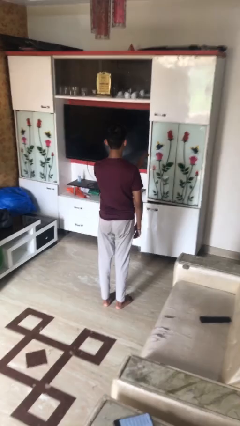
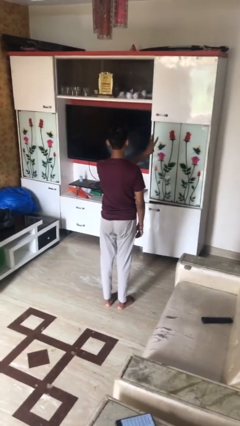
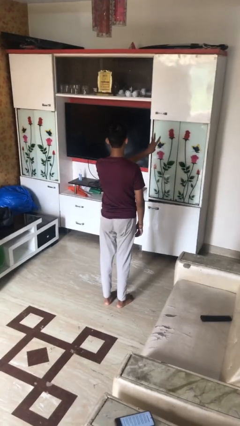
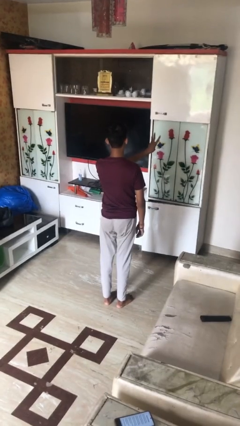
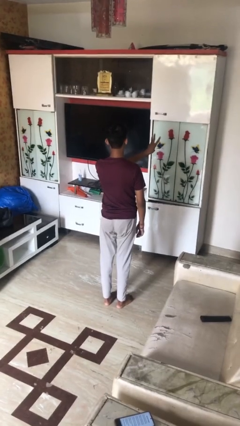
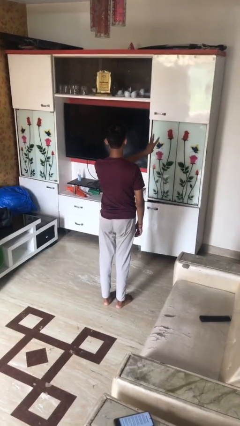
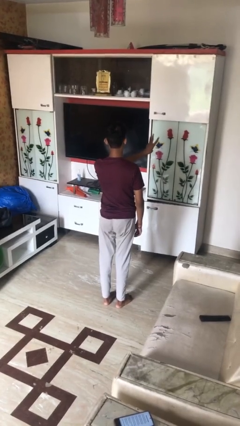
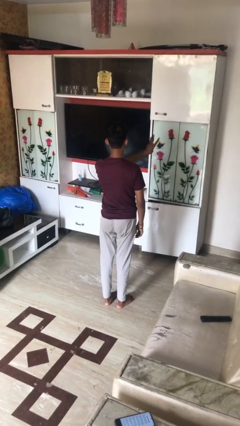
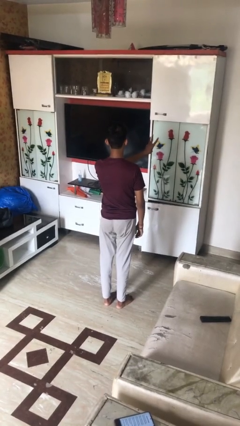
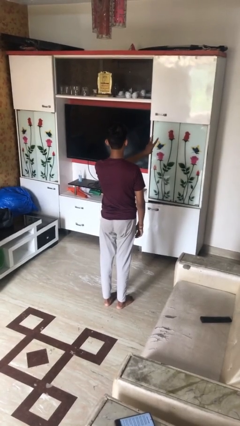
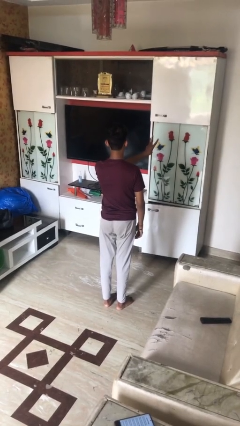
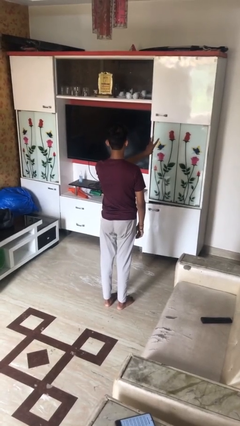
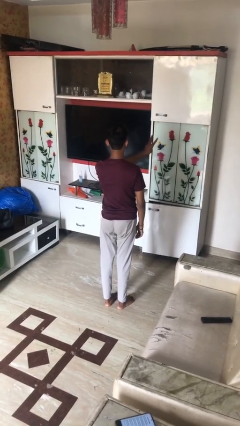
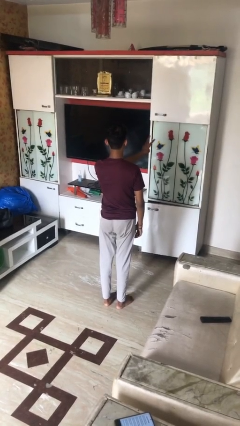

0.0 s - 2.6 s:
person gestures number three

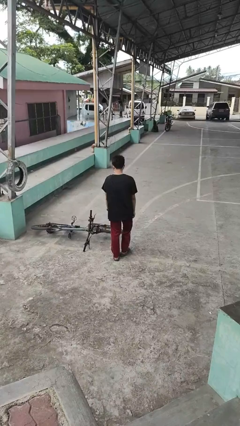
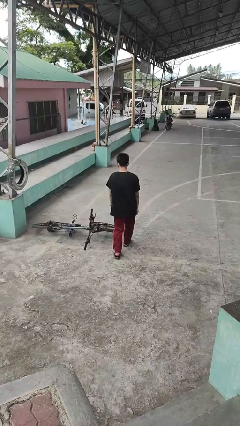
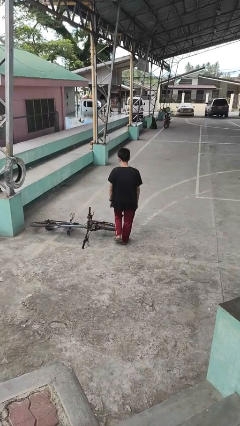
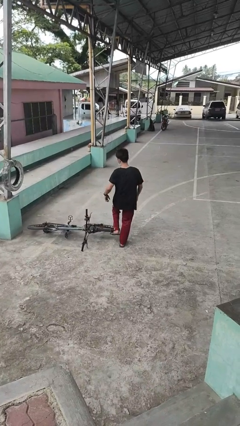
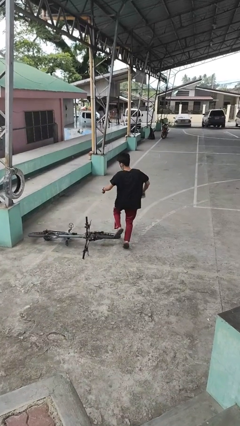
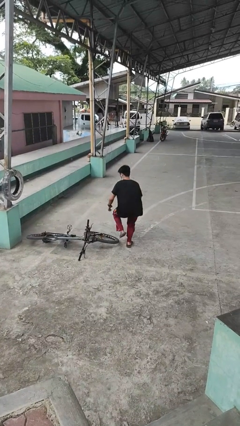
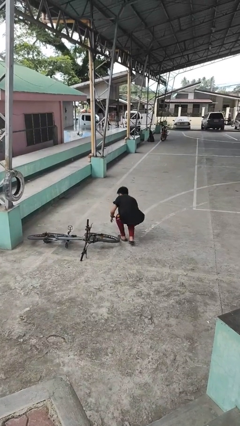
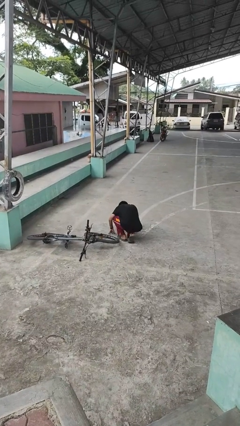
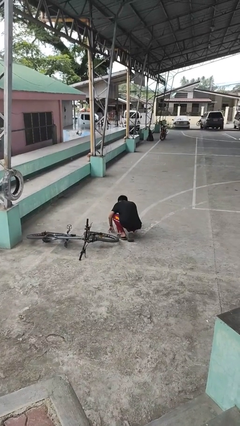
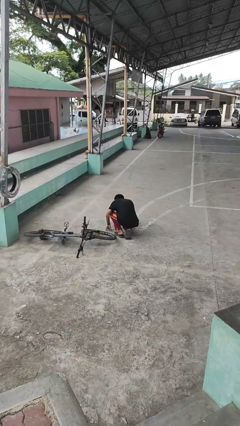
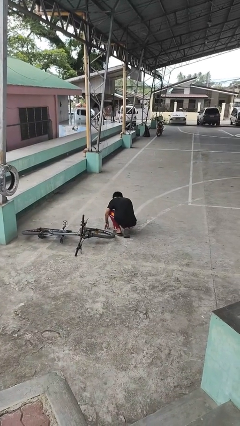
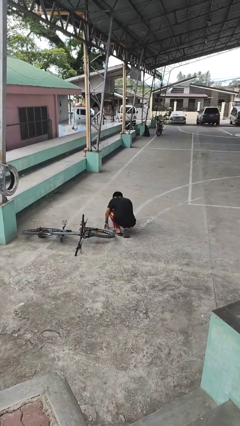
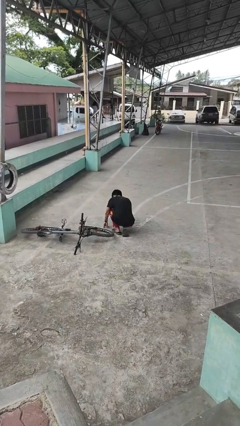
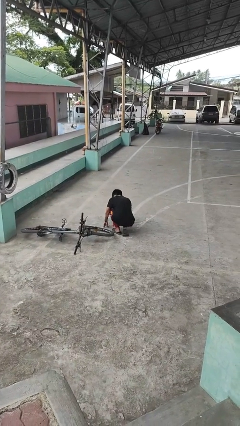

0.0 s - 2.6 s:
person trips on object on floor

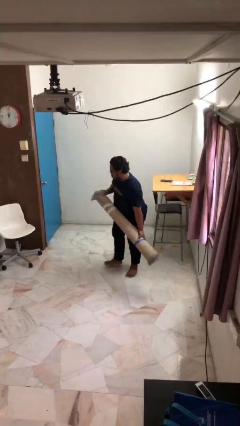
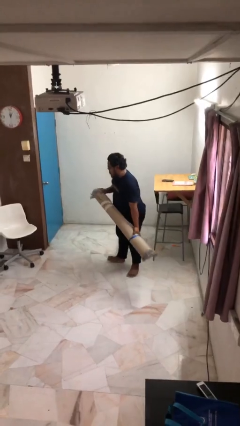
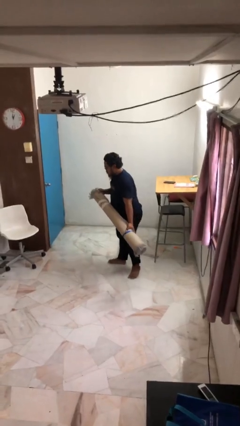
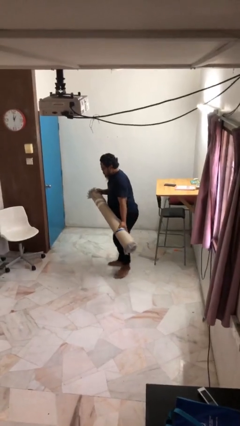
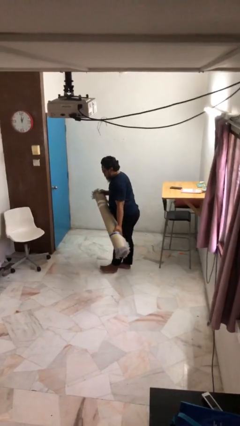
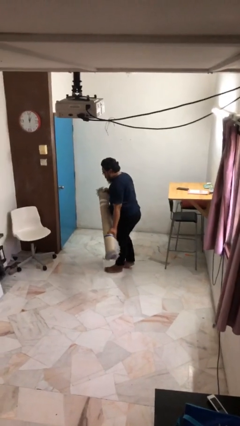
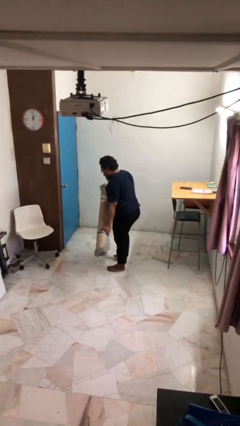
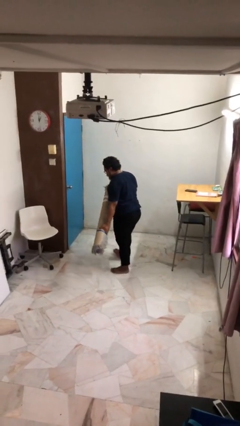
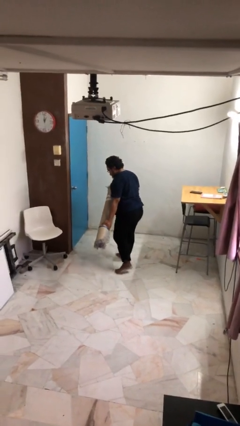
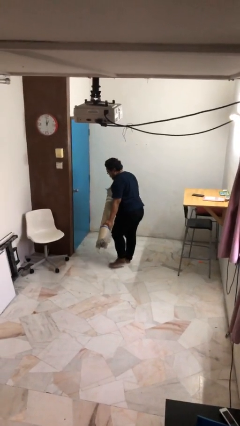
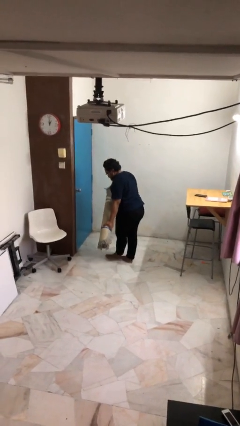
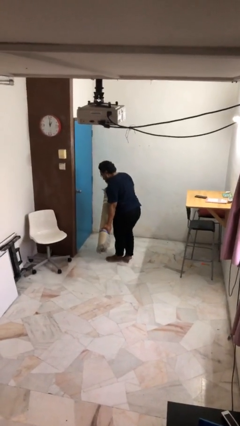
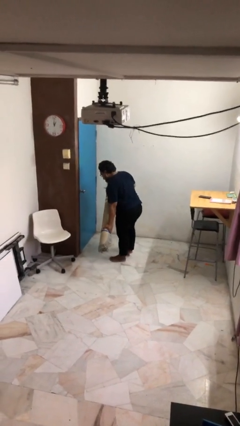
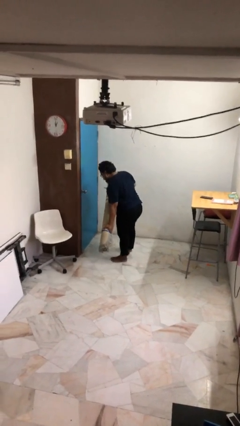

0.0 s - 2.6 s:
person carries heavy object

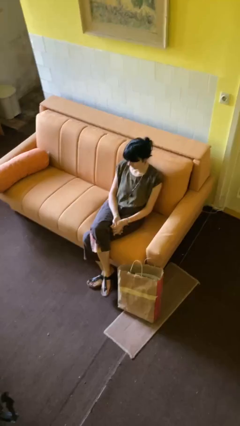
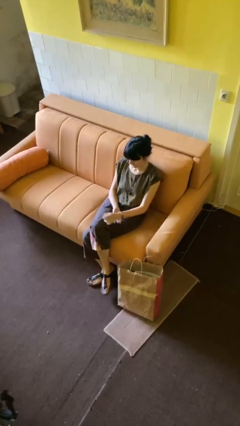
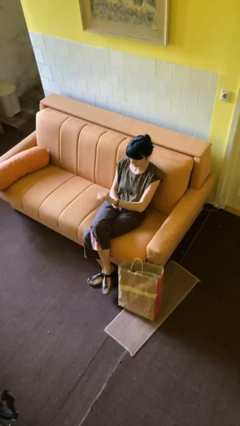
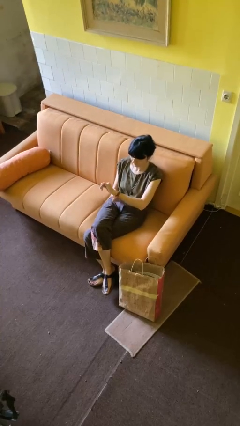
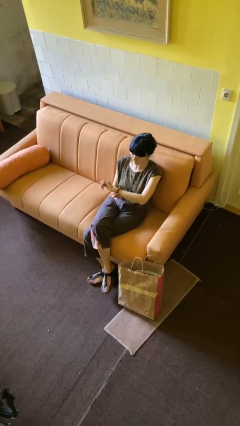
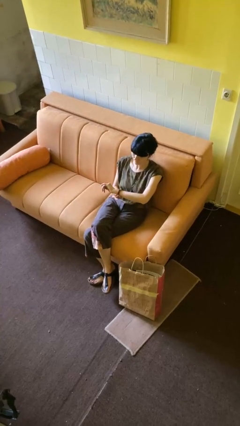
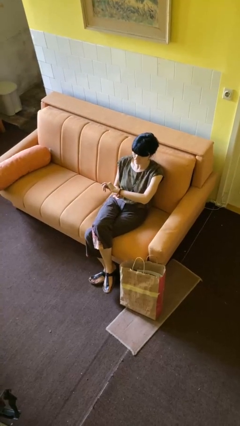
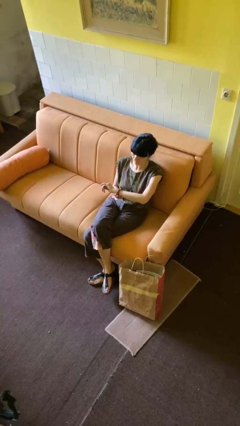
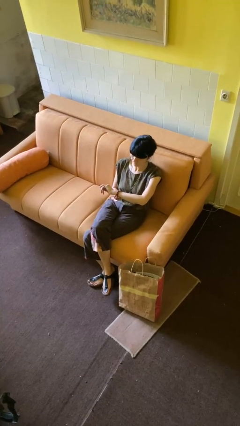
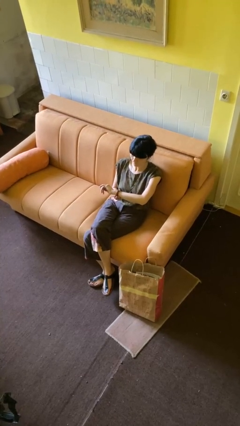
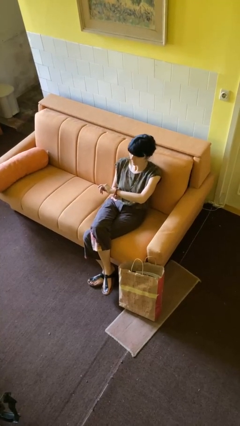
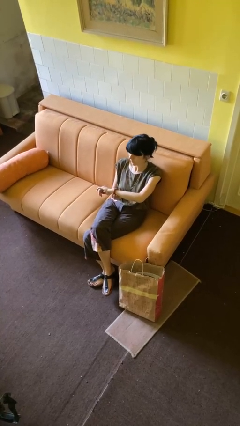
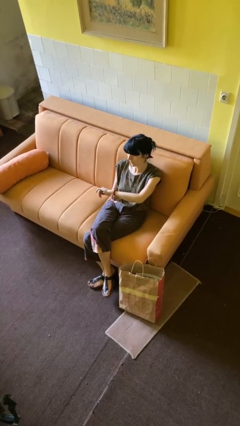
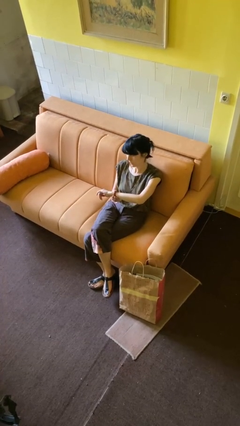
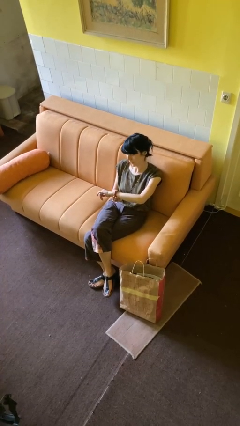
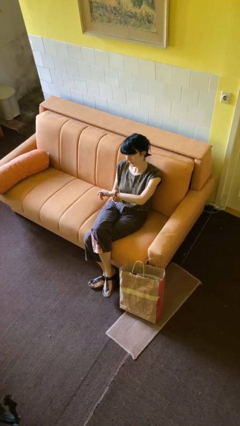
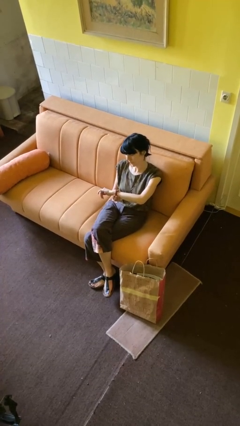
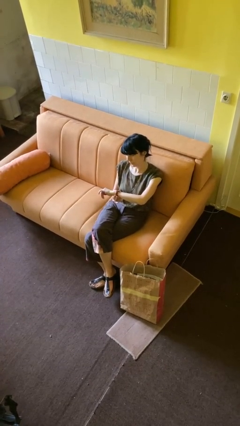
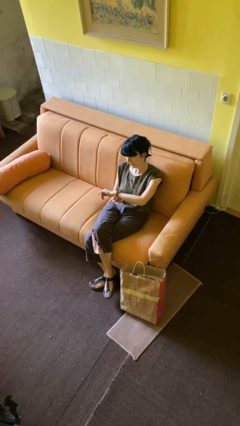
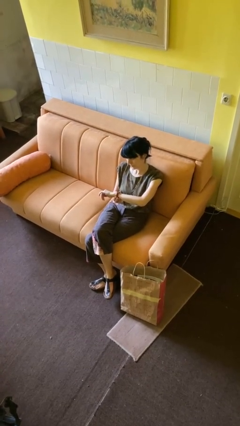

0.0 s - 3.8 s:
person looks at wristwatch

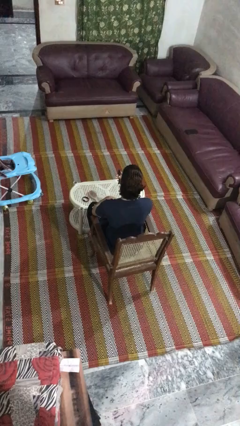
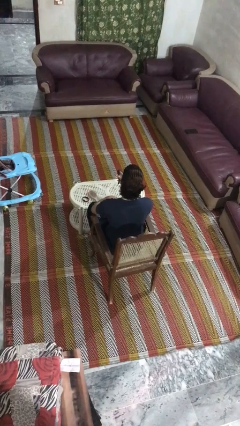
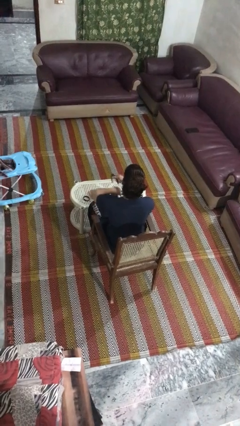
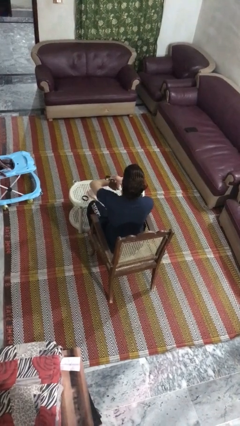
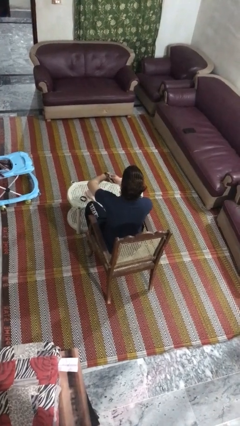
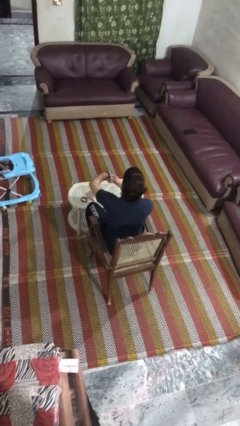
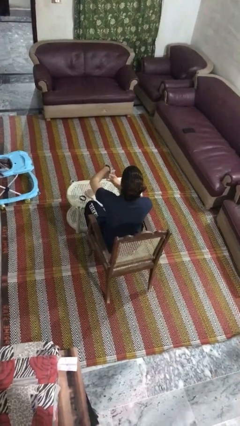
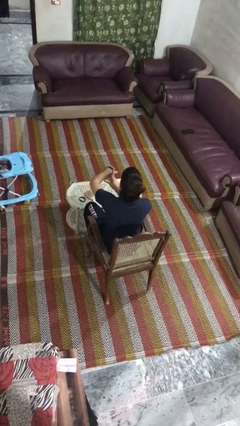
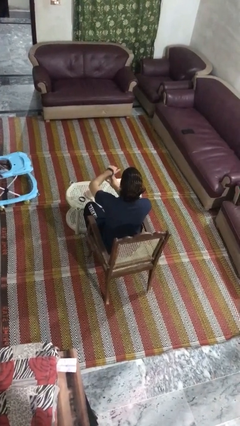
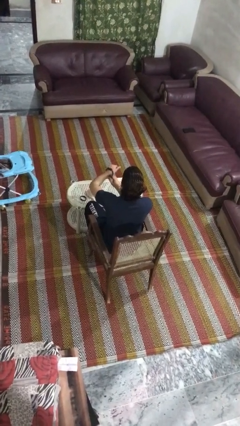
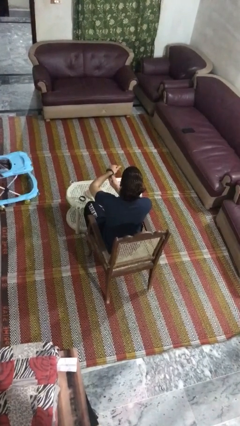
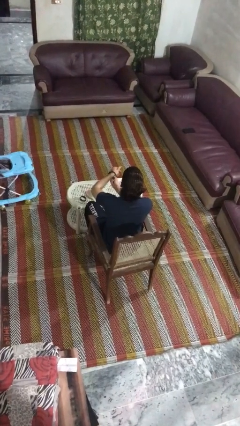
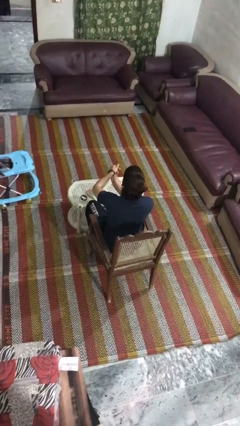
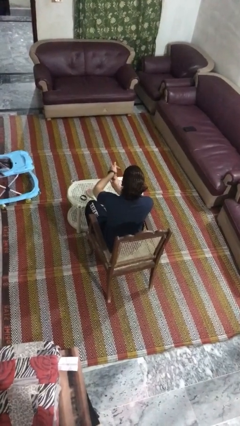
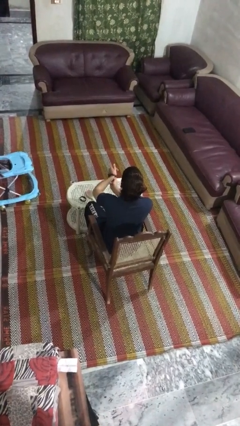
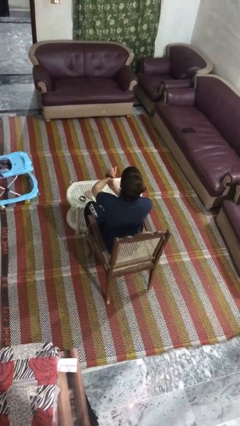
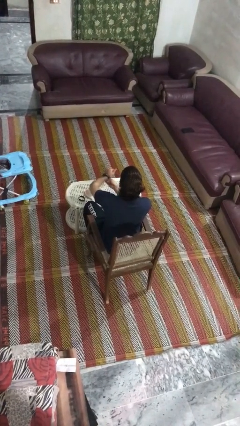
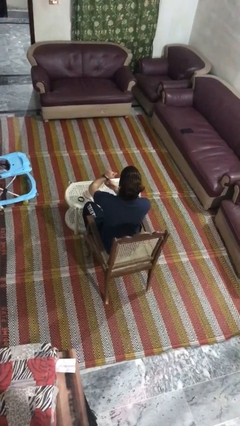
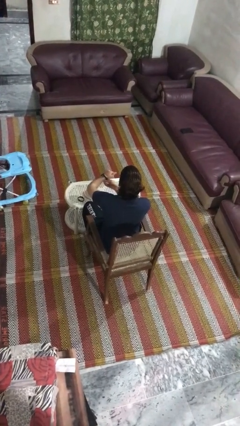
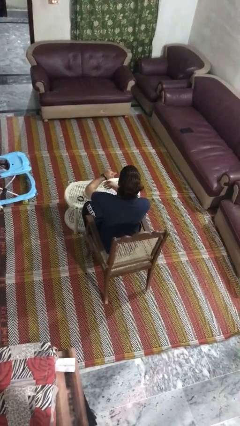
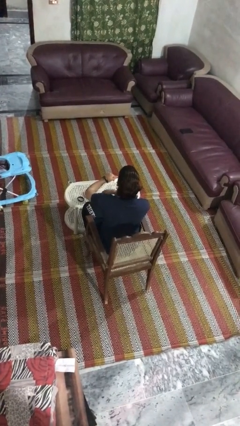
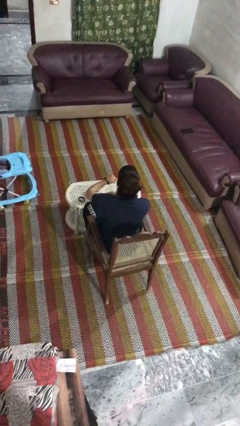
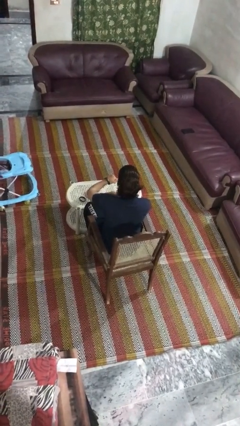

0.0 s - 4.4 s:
person puts on wristwatch

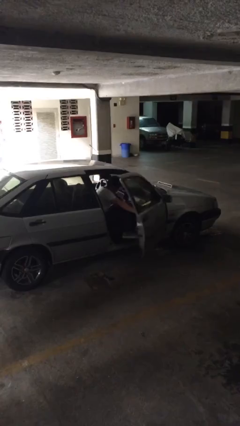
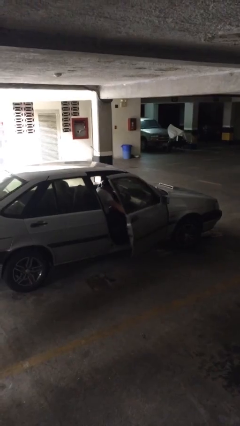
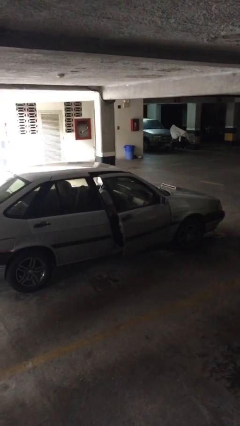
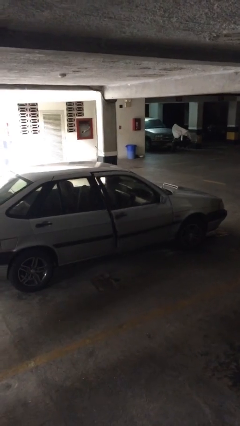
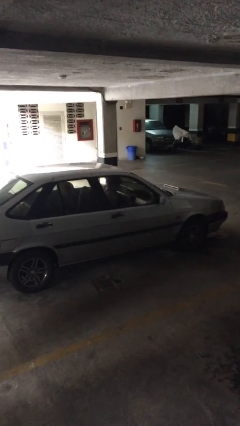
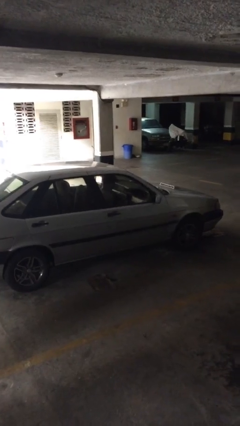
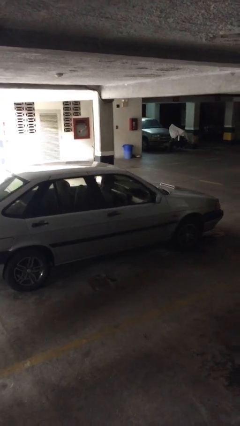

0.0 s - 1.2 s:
person closes car door
